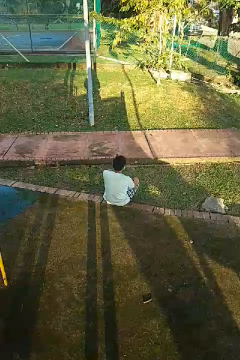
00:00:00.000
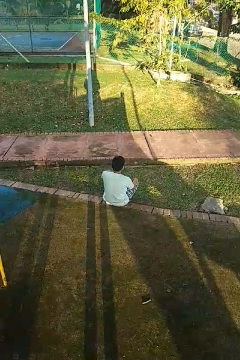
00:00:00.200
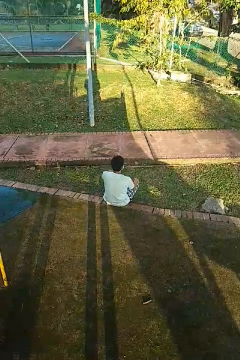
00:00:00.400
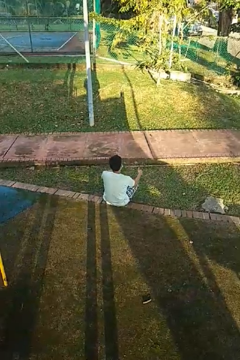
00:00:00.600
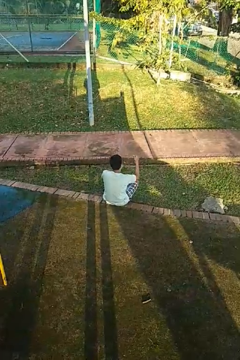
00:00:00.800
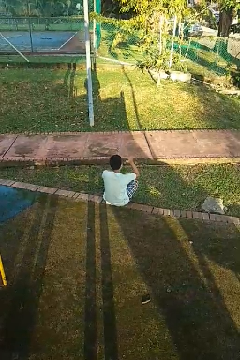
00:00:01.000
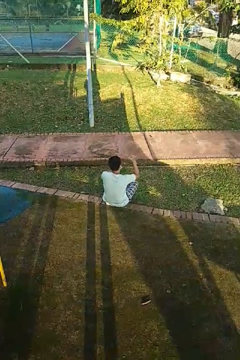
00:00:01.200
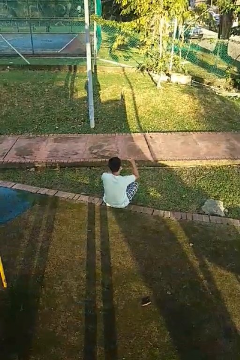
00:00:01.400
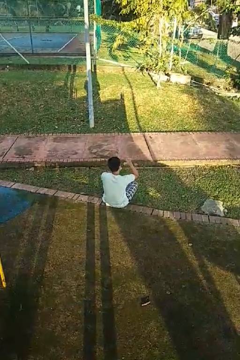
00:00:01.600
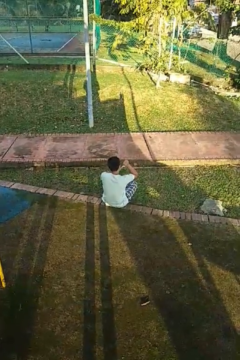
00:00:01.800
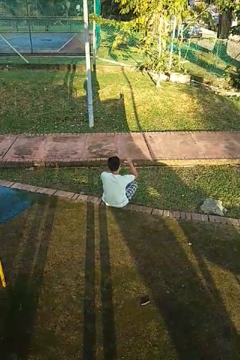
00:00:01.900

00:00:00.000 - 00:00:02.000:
person gestures behind me

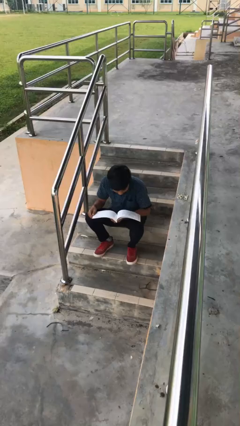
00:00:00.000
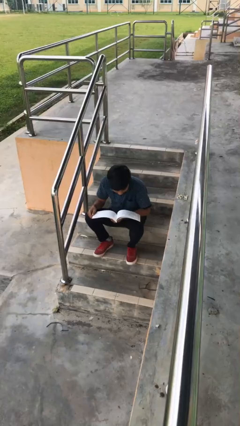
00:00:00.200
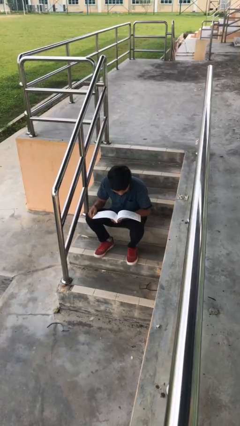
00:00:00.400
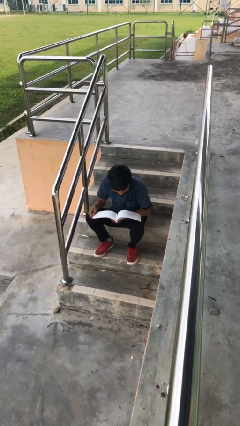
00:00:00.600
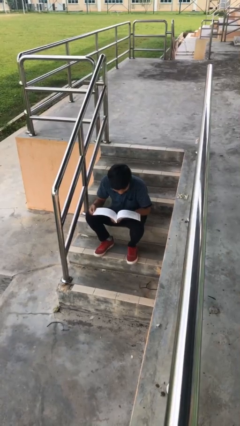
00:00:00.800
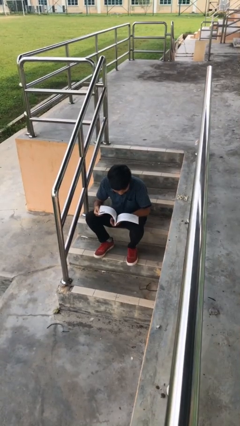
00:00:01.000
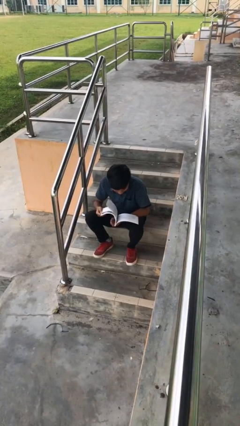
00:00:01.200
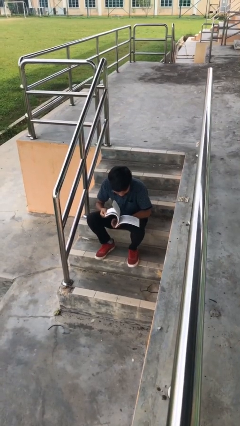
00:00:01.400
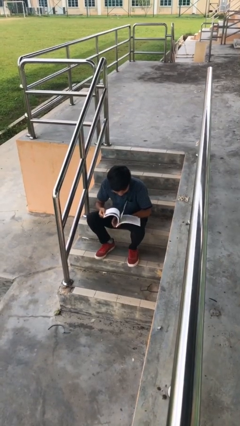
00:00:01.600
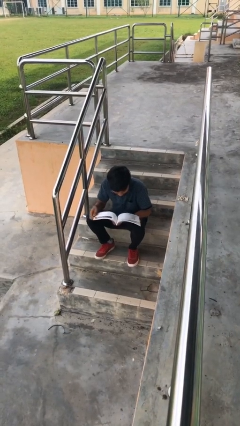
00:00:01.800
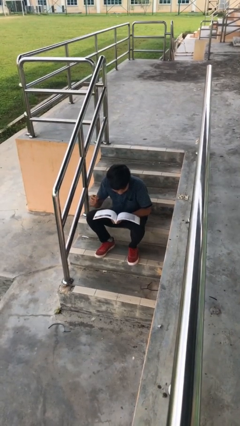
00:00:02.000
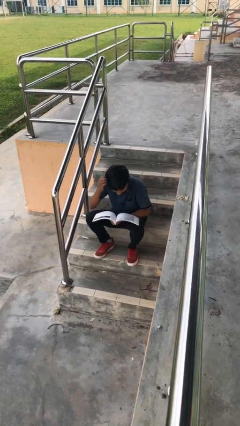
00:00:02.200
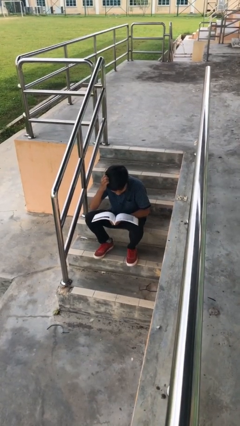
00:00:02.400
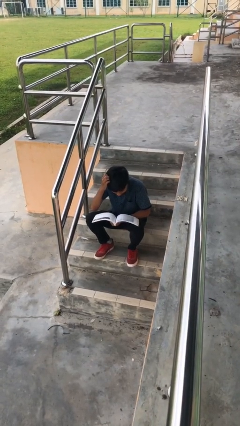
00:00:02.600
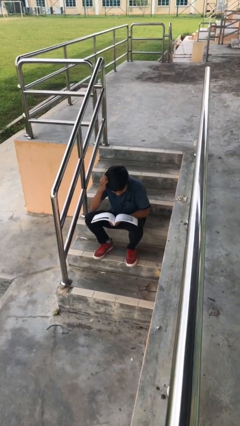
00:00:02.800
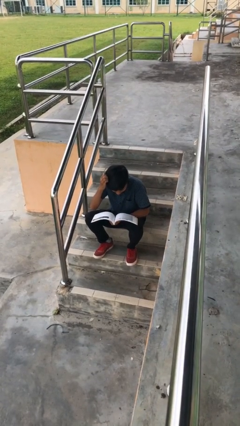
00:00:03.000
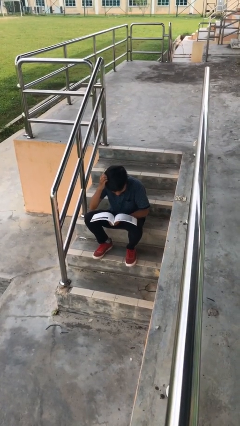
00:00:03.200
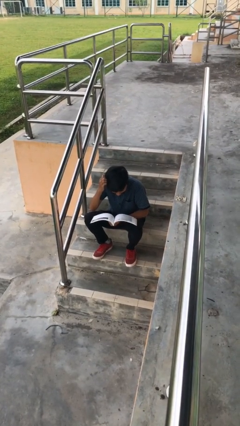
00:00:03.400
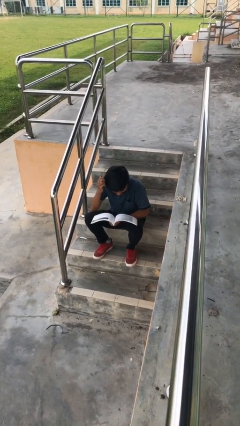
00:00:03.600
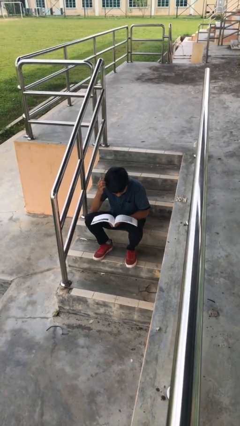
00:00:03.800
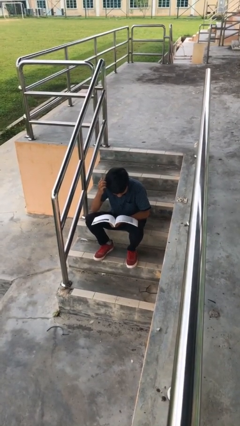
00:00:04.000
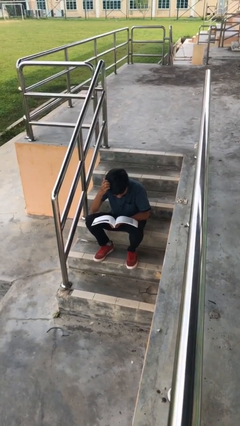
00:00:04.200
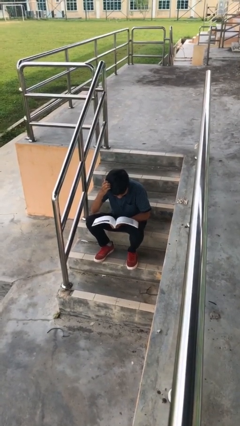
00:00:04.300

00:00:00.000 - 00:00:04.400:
person reads document

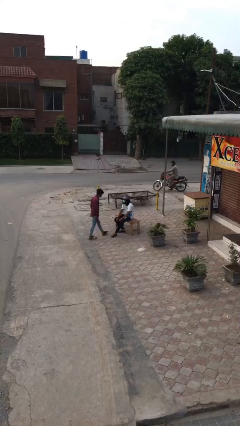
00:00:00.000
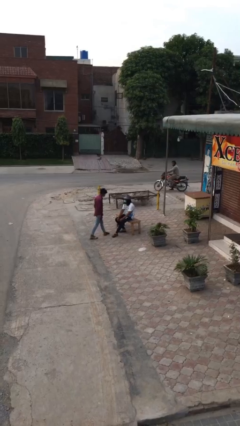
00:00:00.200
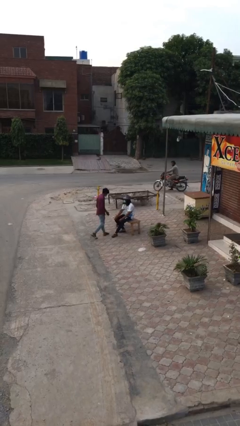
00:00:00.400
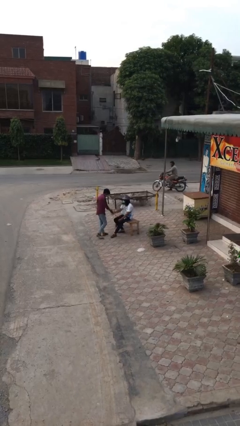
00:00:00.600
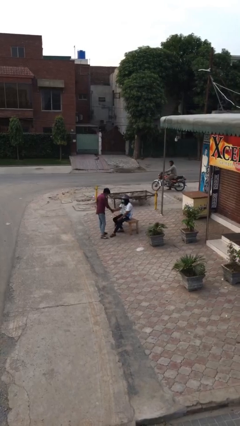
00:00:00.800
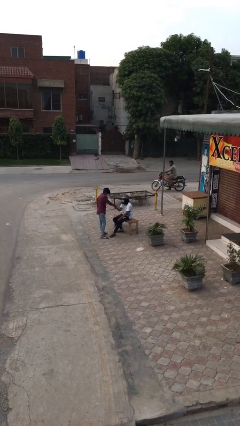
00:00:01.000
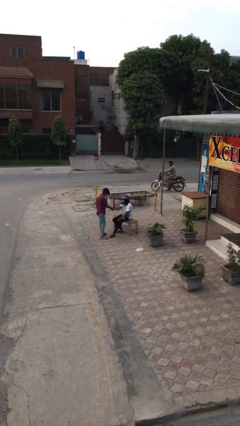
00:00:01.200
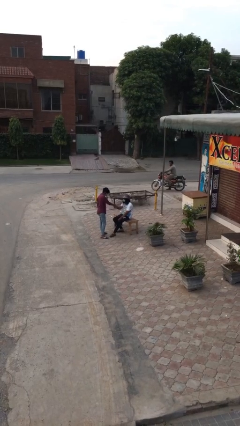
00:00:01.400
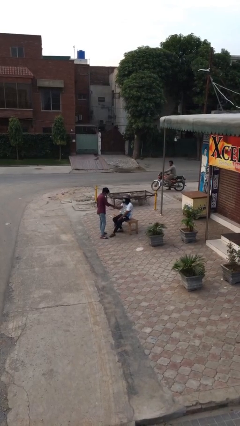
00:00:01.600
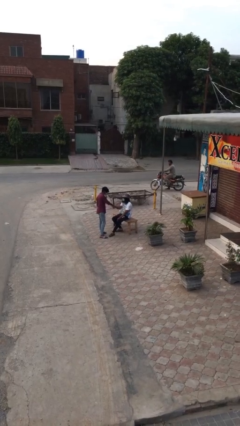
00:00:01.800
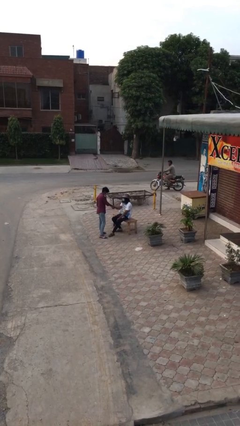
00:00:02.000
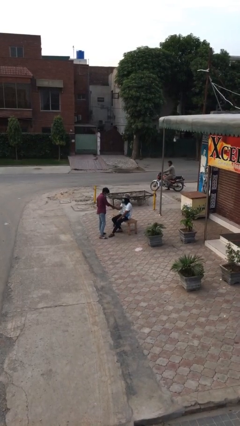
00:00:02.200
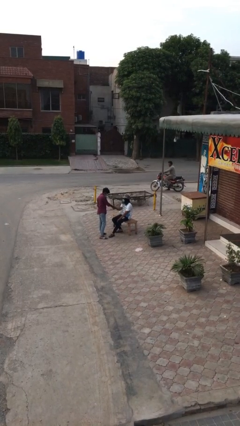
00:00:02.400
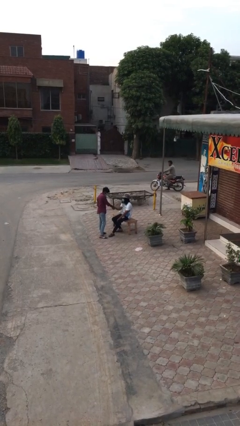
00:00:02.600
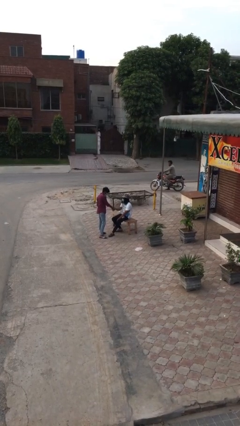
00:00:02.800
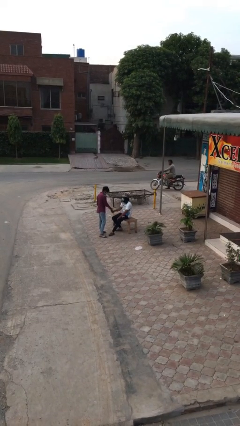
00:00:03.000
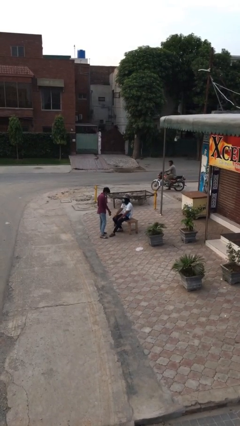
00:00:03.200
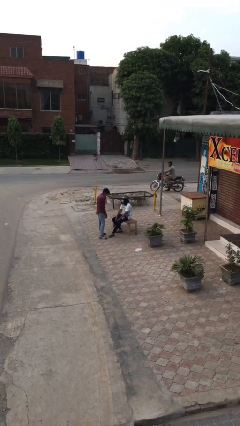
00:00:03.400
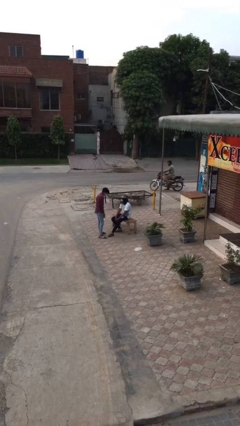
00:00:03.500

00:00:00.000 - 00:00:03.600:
person shakes hand

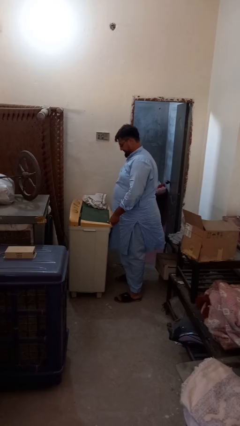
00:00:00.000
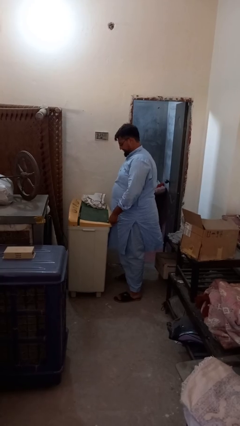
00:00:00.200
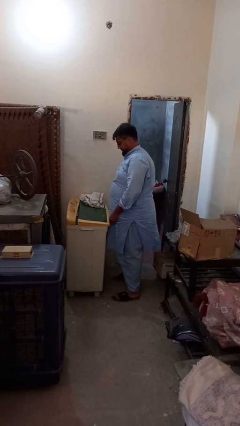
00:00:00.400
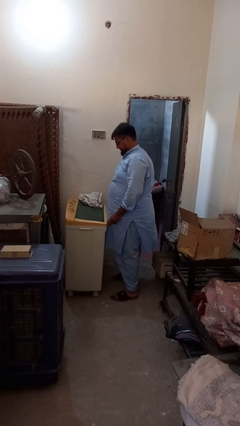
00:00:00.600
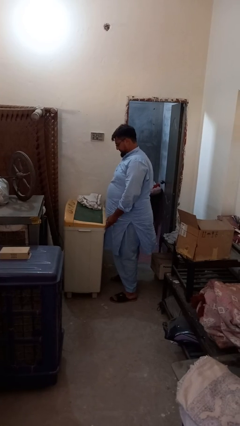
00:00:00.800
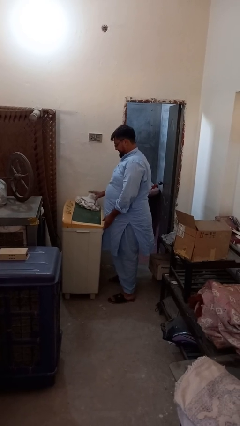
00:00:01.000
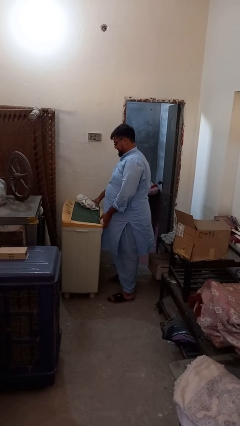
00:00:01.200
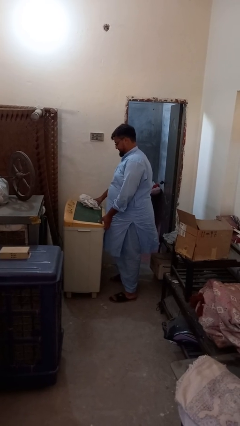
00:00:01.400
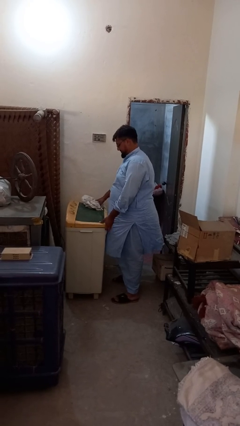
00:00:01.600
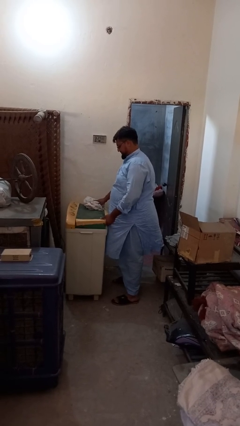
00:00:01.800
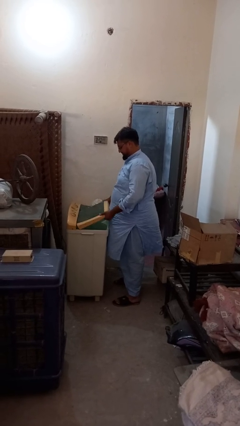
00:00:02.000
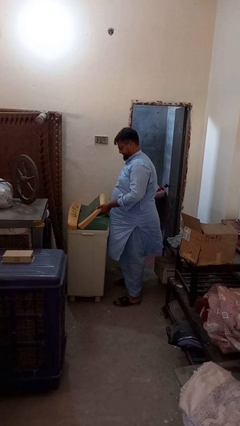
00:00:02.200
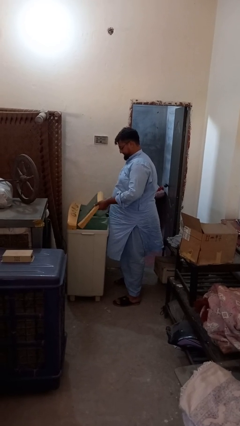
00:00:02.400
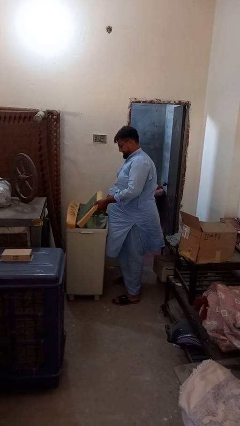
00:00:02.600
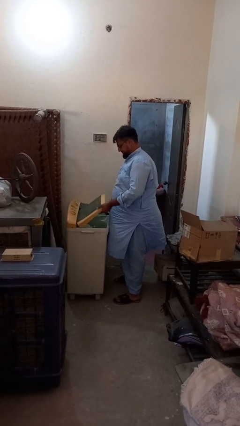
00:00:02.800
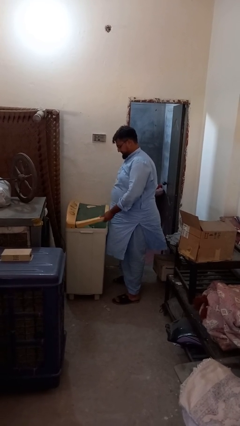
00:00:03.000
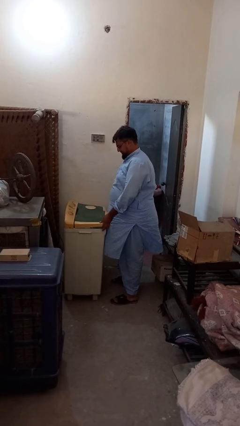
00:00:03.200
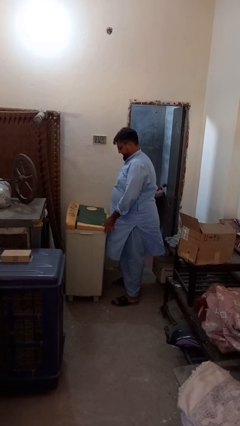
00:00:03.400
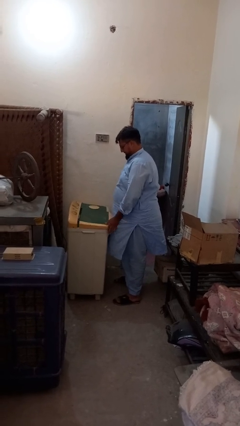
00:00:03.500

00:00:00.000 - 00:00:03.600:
person loads clotheswasher

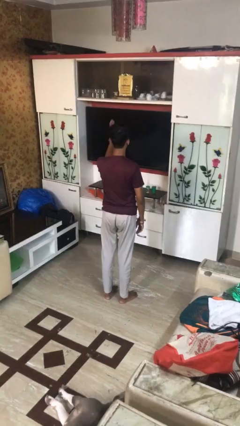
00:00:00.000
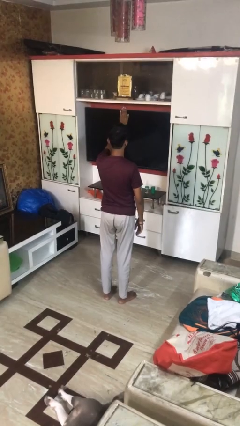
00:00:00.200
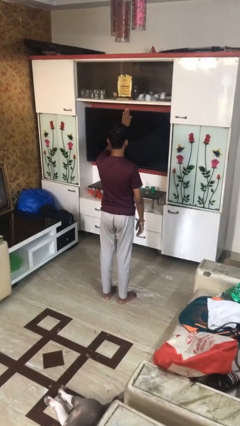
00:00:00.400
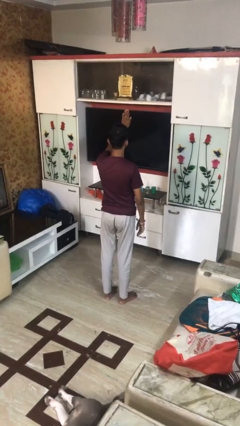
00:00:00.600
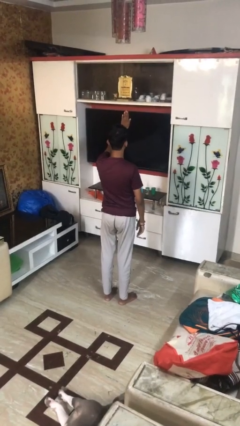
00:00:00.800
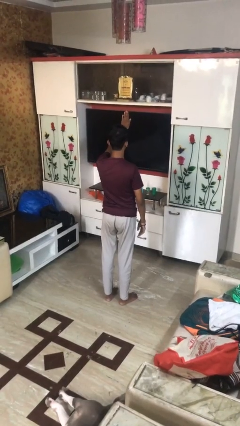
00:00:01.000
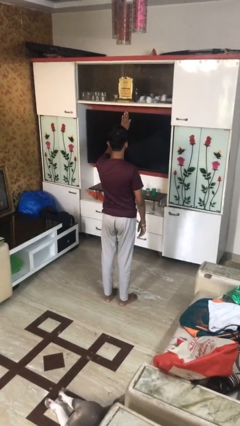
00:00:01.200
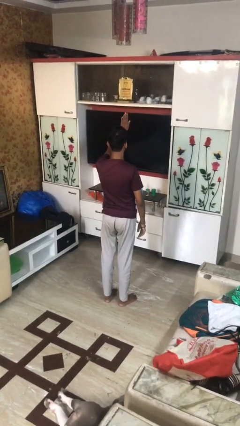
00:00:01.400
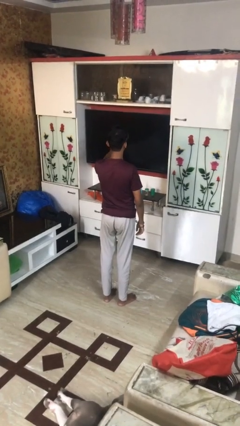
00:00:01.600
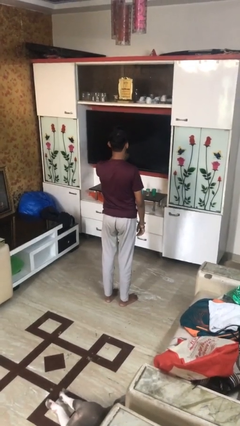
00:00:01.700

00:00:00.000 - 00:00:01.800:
person gestures stop

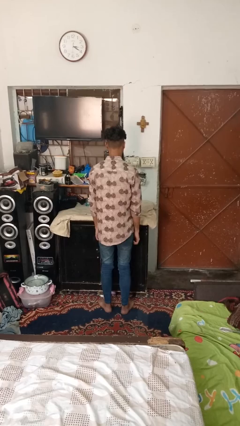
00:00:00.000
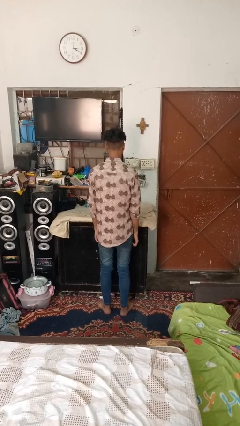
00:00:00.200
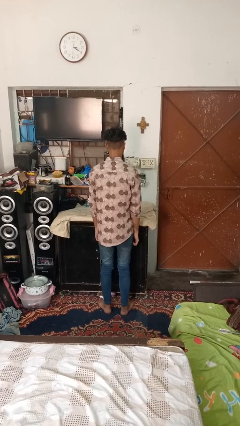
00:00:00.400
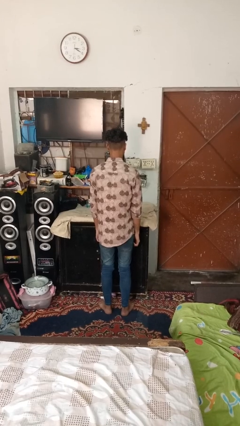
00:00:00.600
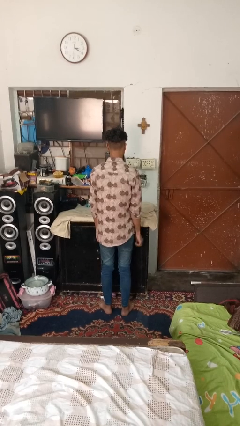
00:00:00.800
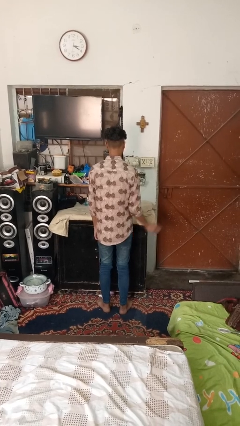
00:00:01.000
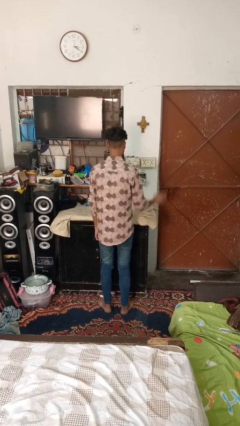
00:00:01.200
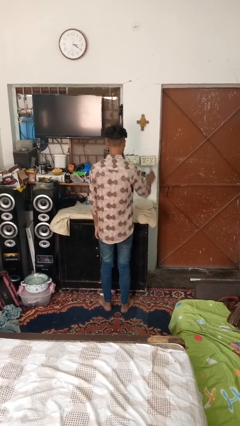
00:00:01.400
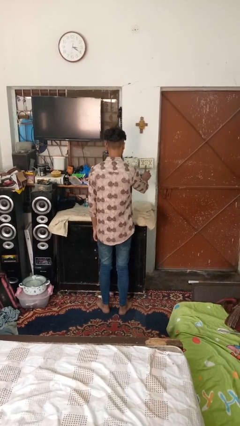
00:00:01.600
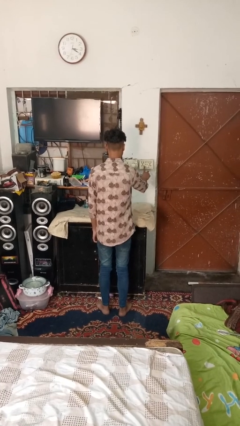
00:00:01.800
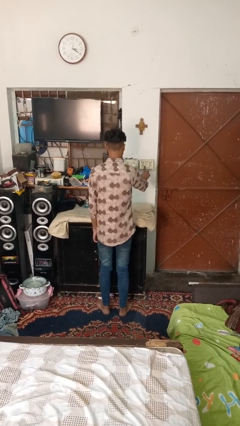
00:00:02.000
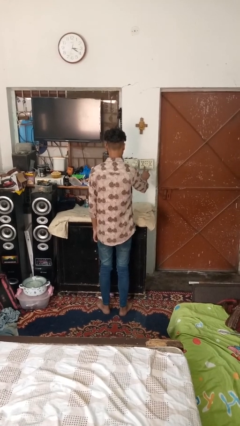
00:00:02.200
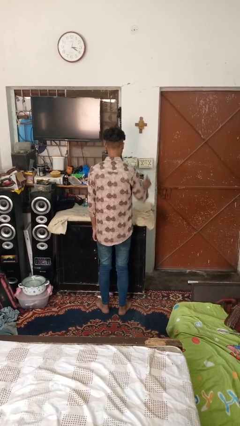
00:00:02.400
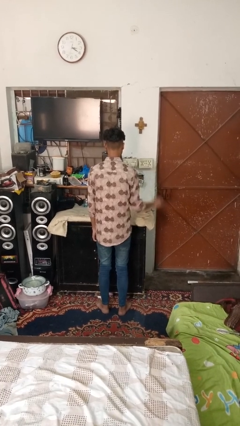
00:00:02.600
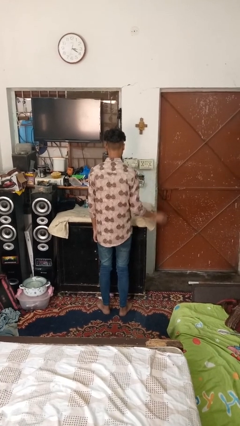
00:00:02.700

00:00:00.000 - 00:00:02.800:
person turns off fan
